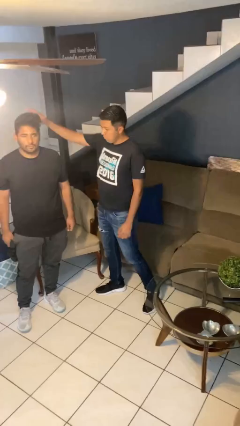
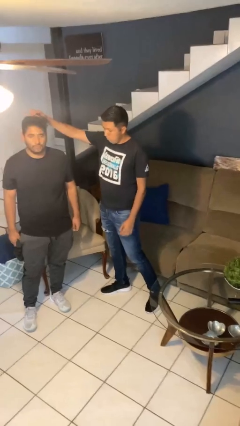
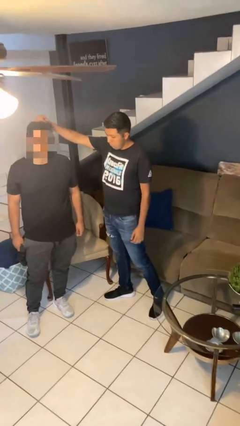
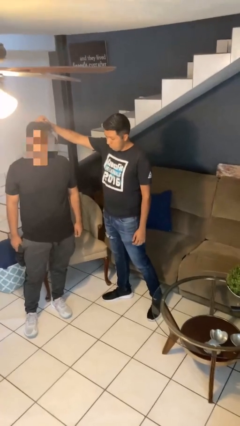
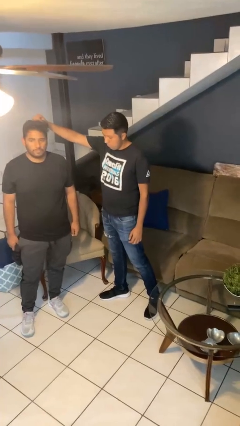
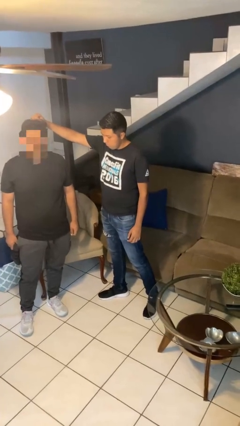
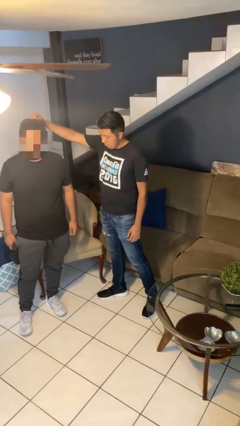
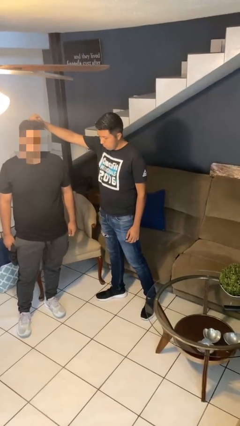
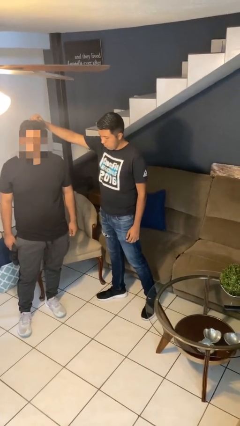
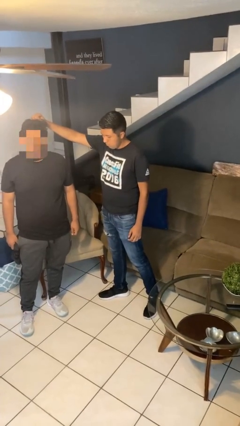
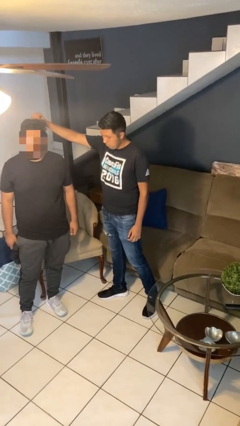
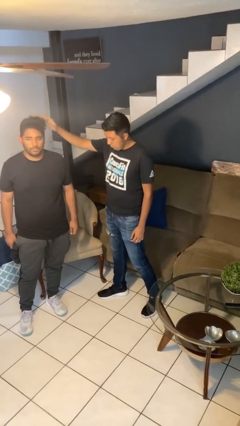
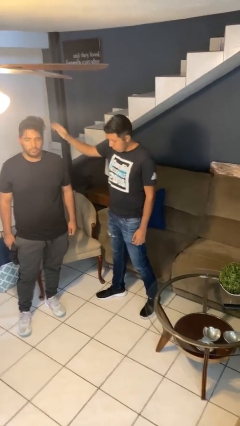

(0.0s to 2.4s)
person grabs person by hair

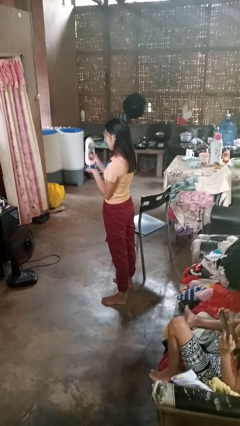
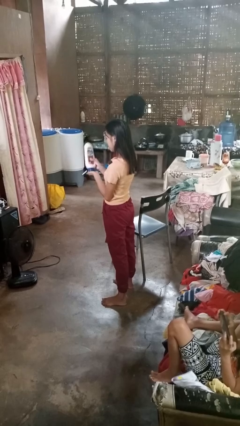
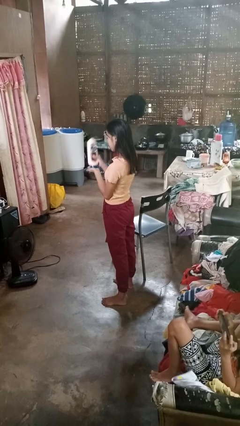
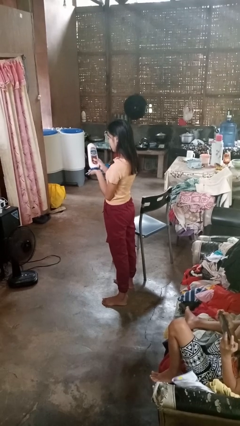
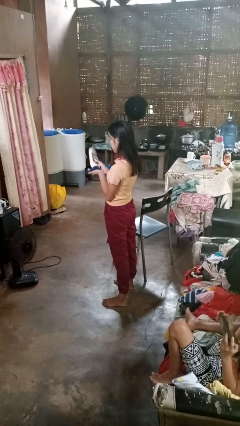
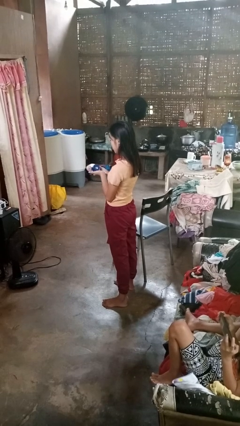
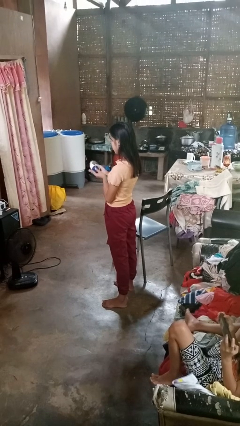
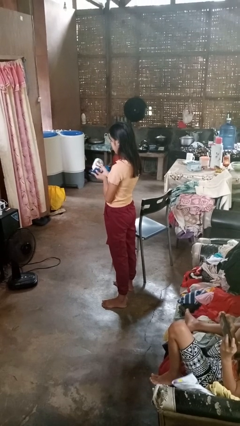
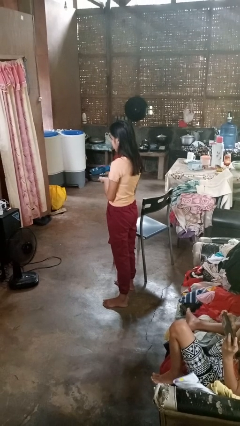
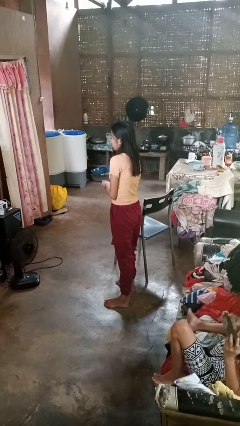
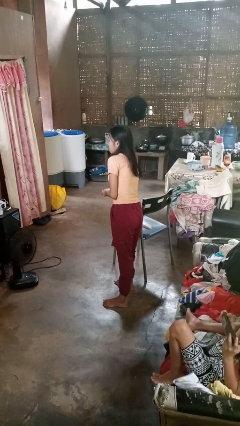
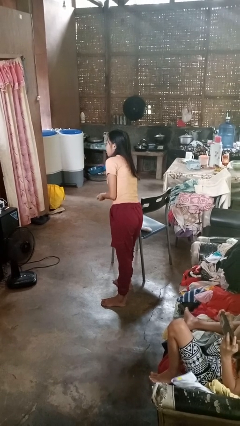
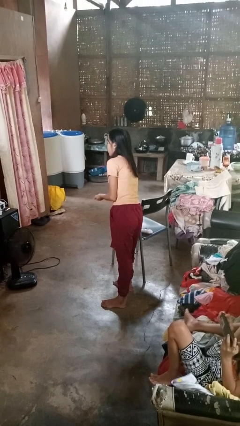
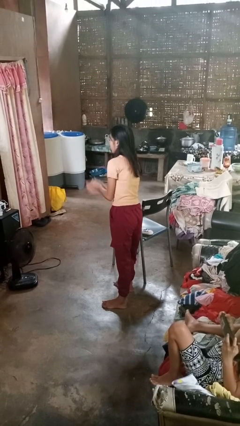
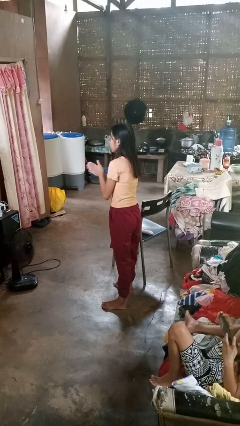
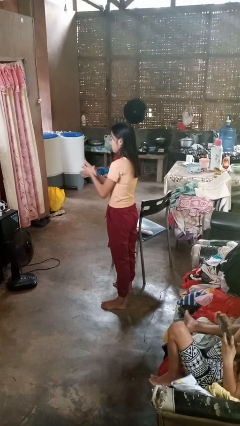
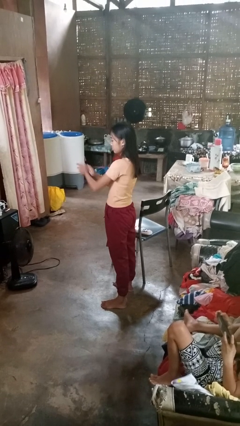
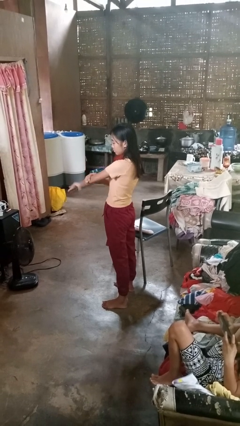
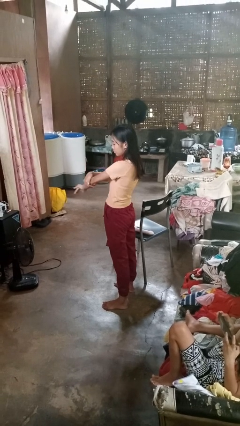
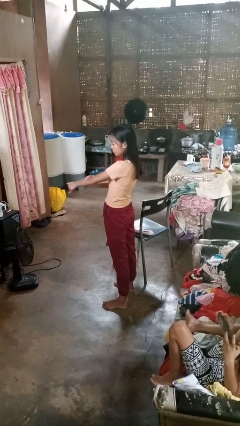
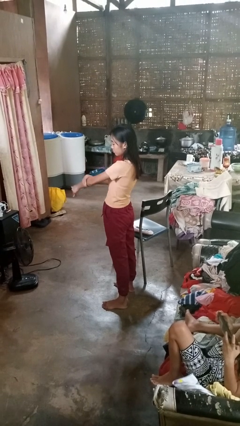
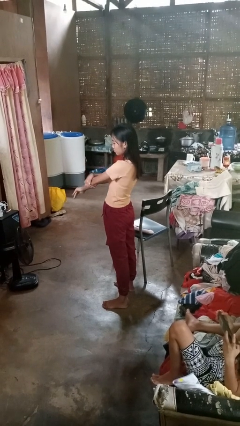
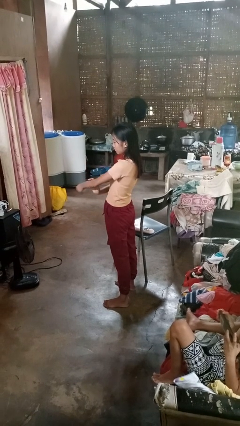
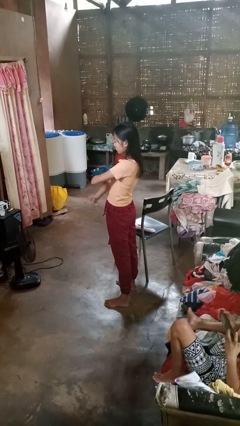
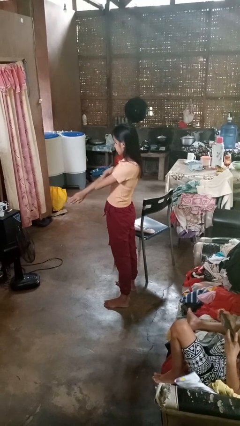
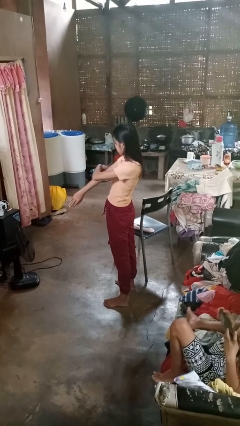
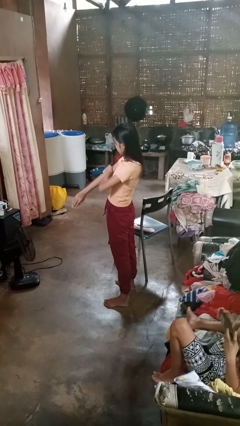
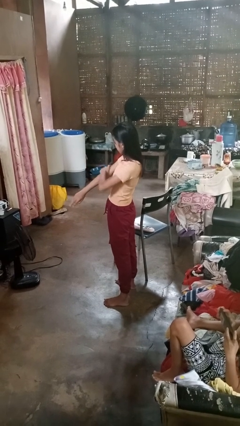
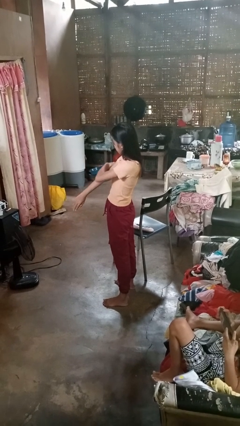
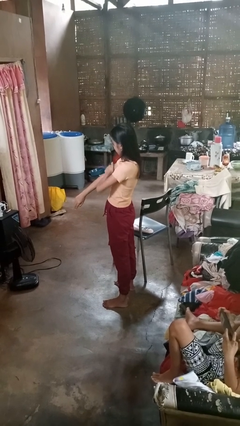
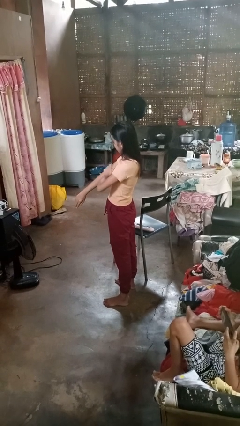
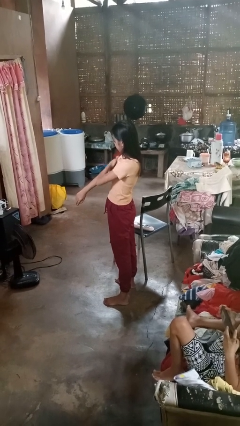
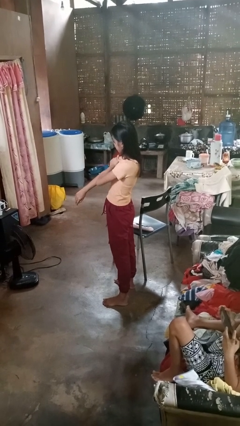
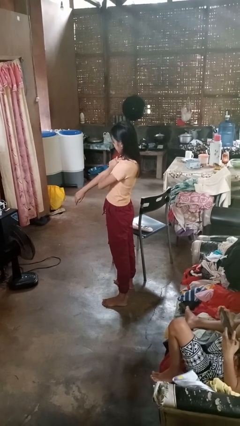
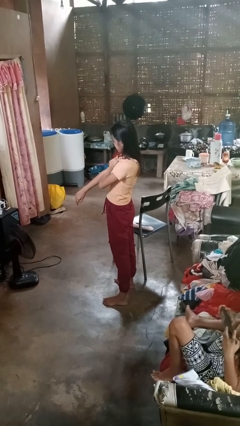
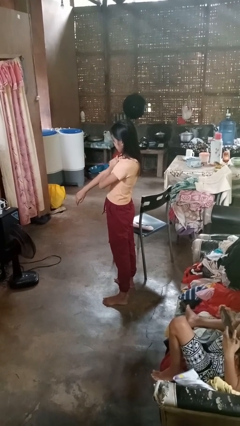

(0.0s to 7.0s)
person applies sunscreen

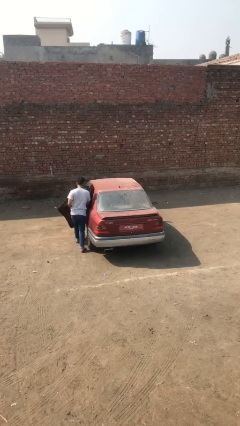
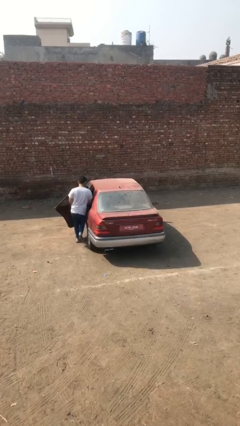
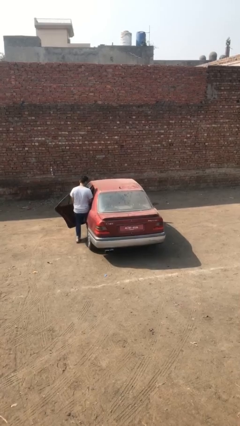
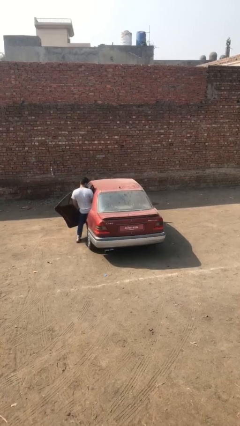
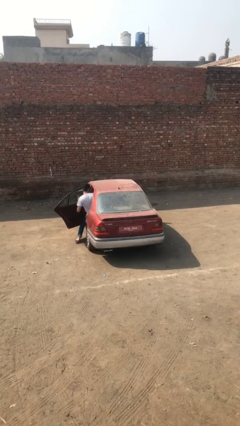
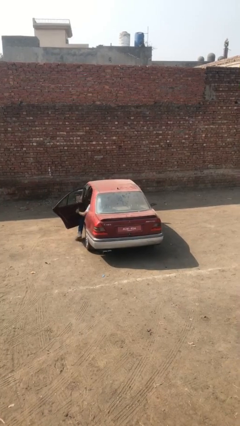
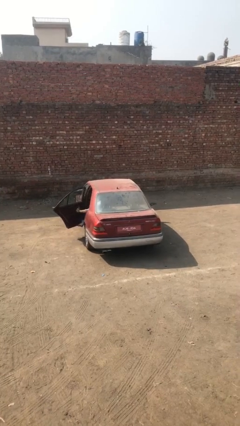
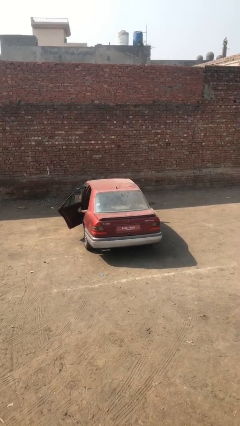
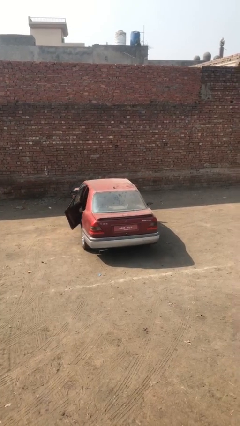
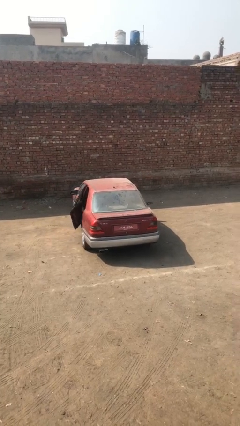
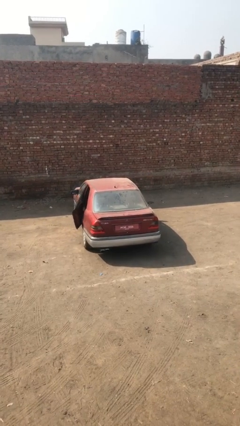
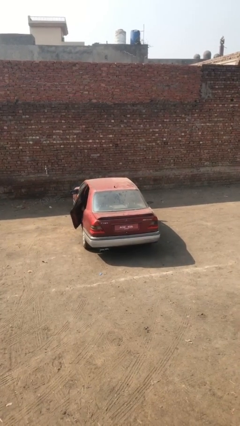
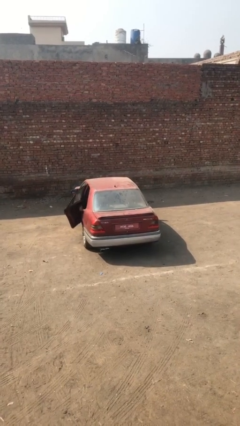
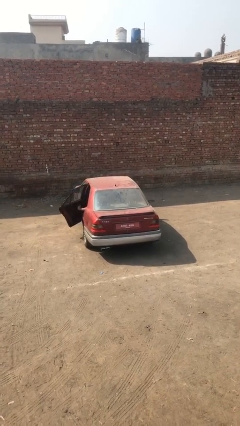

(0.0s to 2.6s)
car picks up person

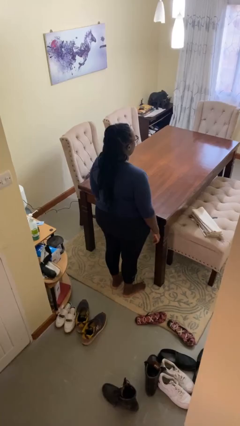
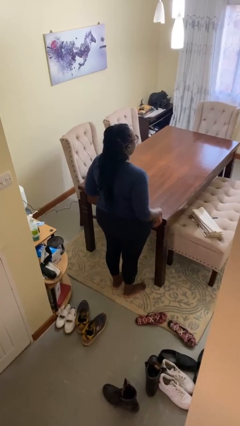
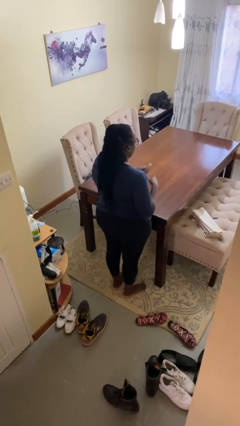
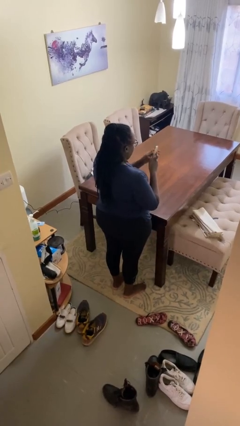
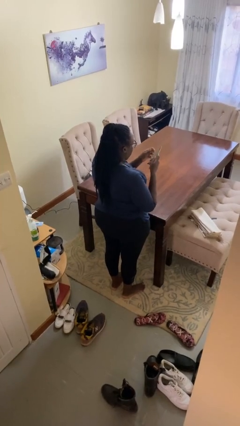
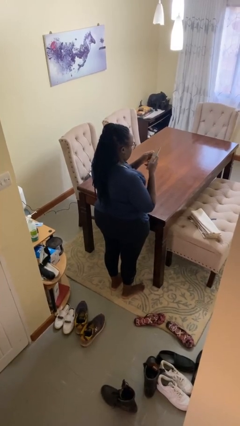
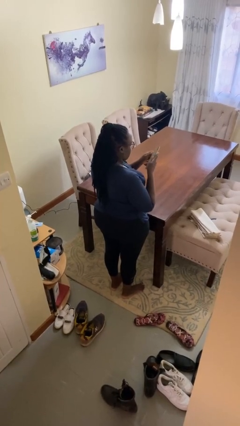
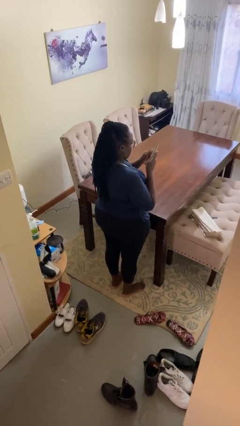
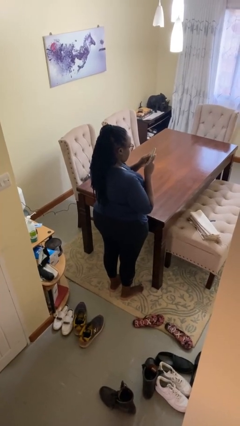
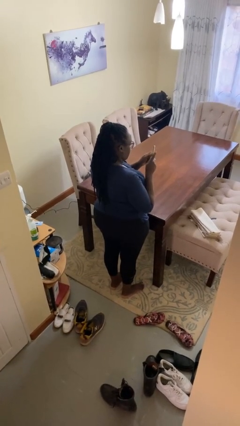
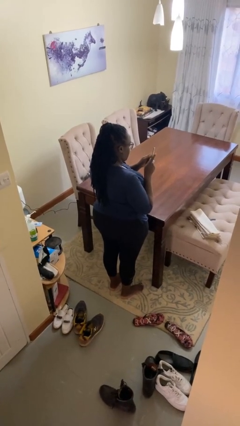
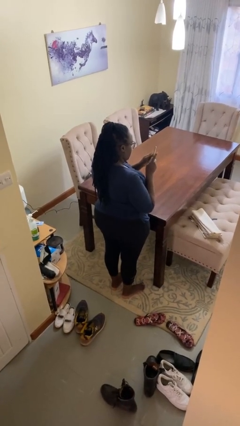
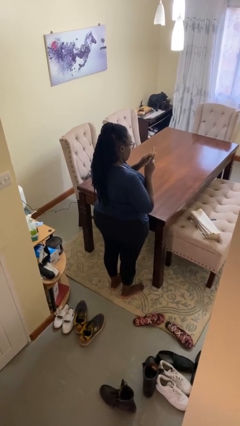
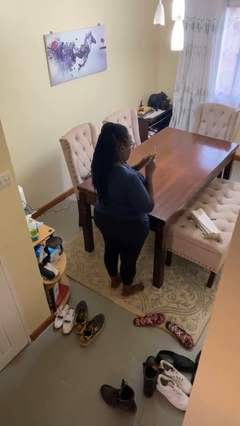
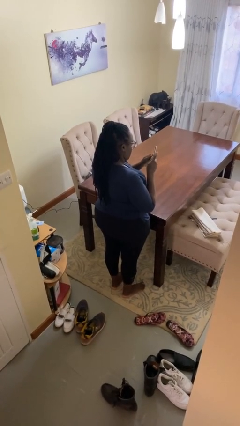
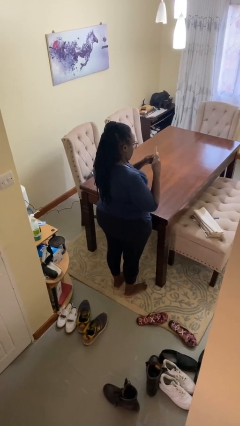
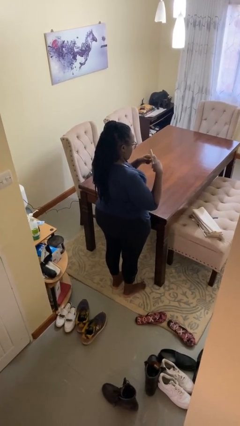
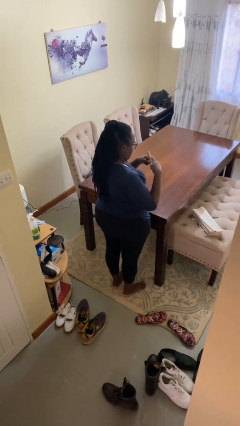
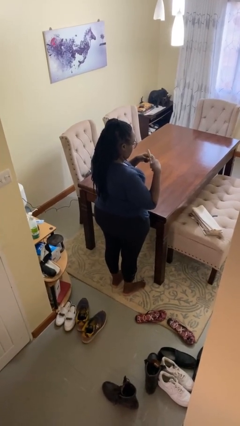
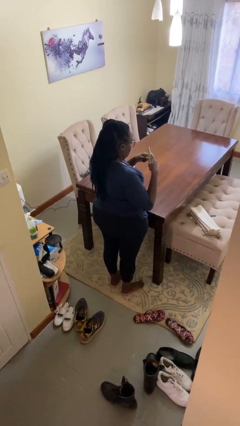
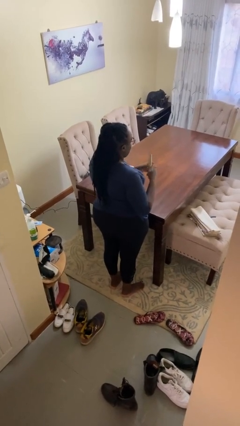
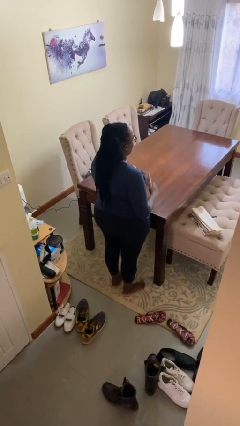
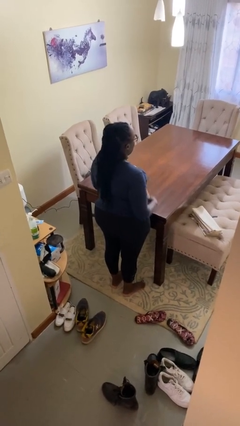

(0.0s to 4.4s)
person files fingernails

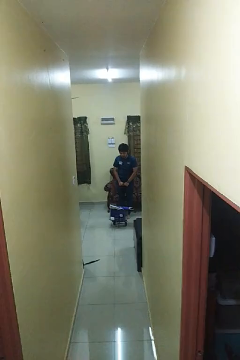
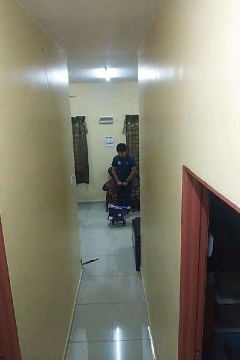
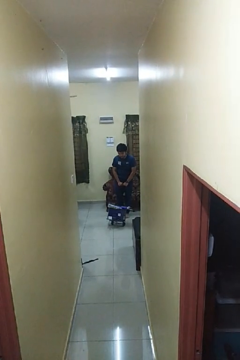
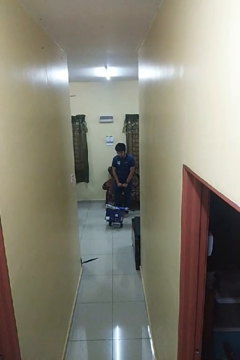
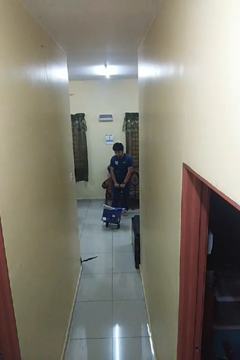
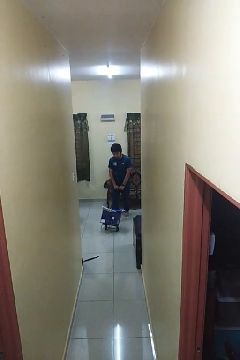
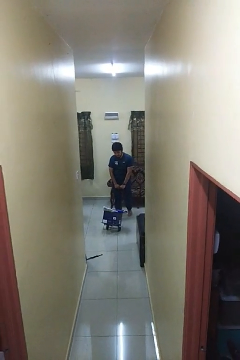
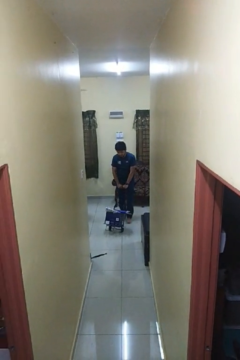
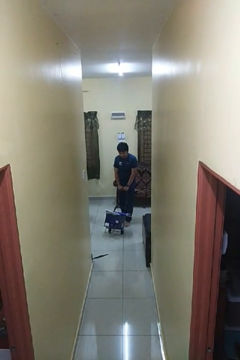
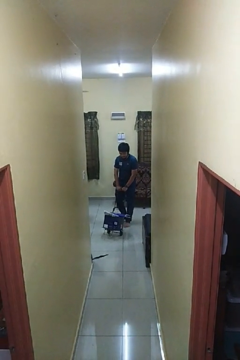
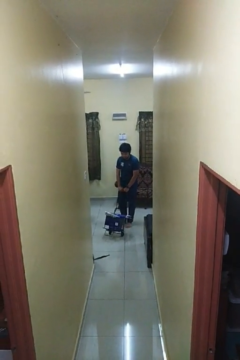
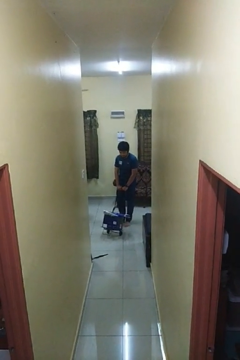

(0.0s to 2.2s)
person pushes wheeled cart
